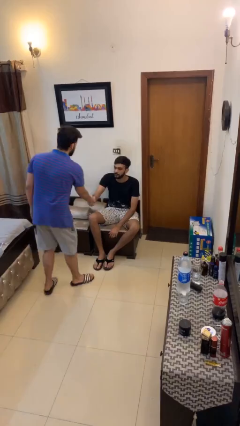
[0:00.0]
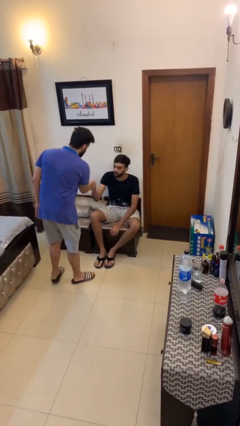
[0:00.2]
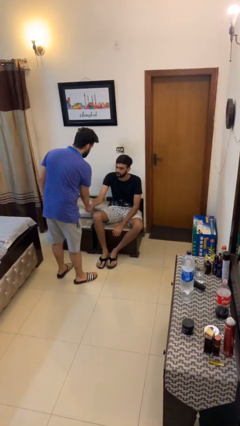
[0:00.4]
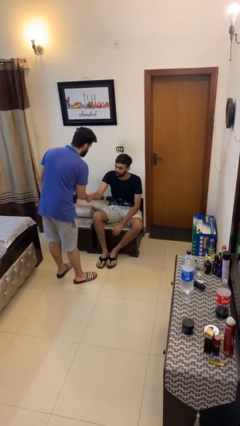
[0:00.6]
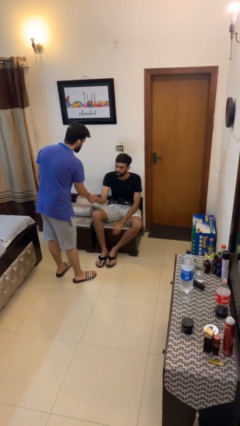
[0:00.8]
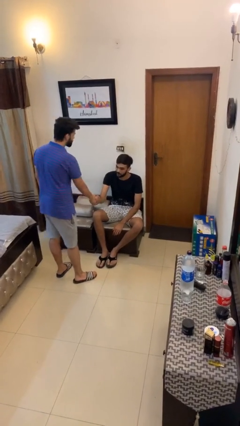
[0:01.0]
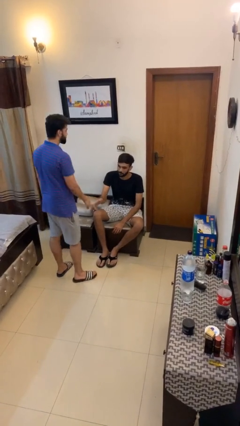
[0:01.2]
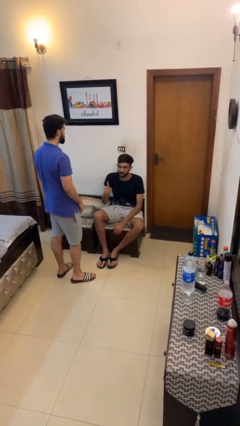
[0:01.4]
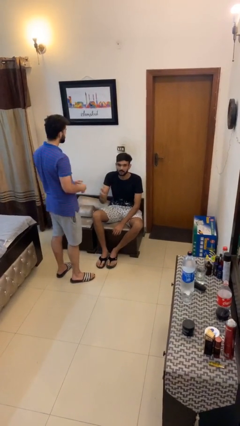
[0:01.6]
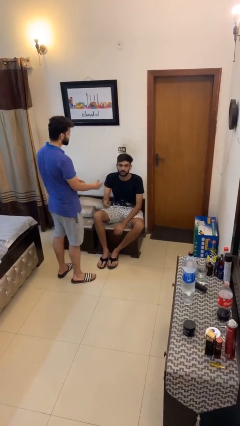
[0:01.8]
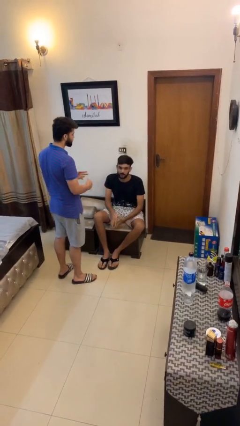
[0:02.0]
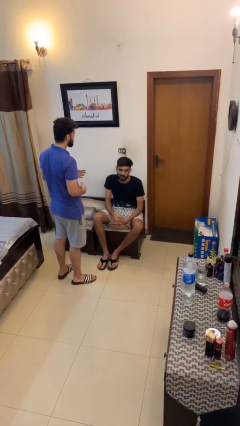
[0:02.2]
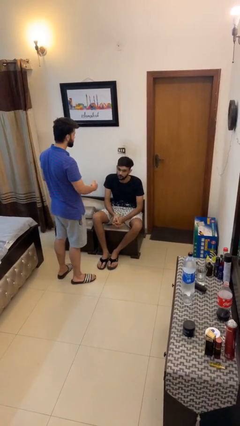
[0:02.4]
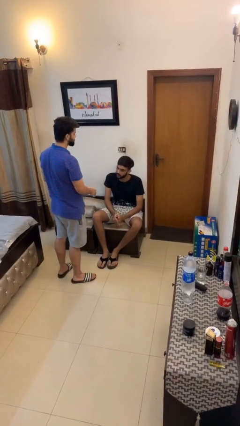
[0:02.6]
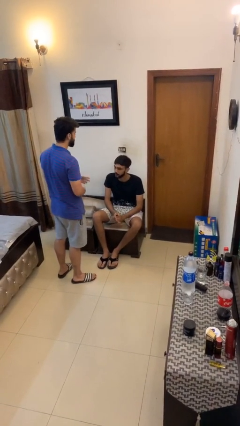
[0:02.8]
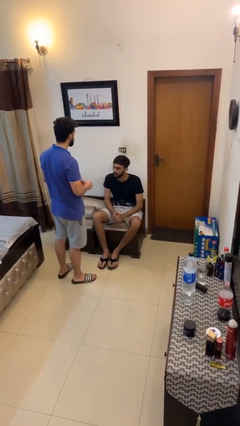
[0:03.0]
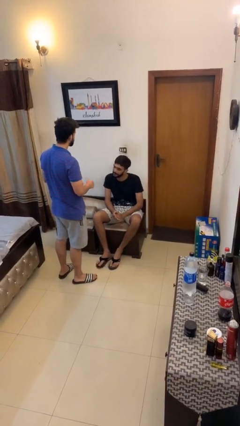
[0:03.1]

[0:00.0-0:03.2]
person shakes hand

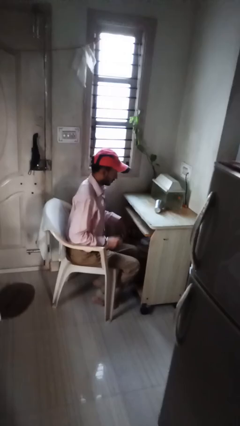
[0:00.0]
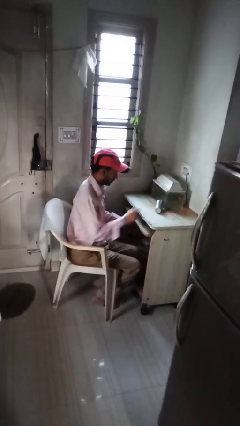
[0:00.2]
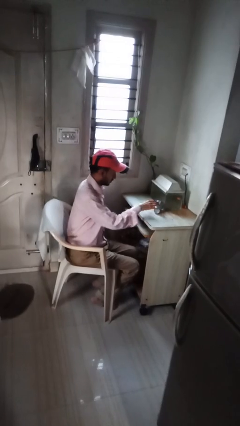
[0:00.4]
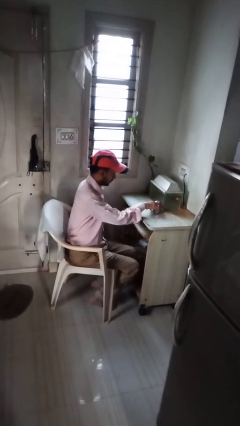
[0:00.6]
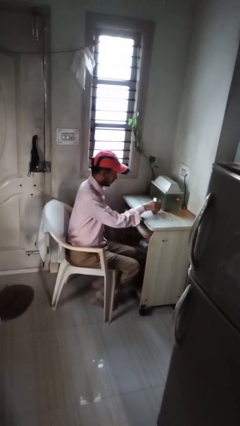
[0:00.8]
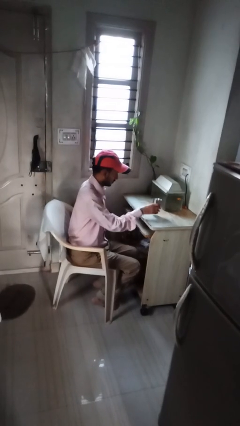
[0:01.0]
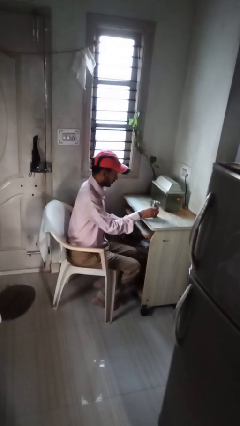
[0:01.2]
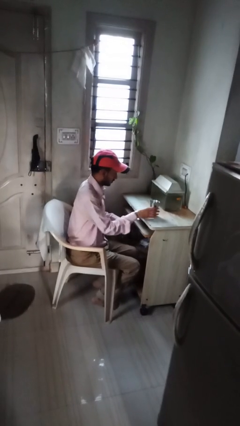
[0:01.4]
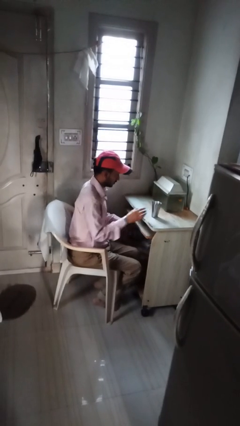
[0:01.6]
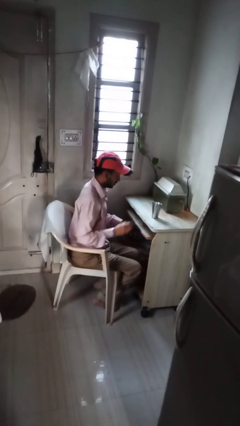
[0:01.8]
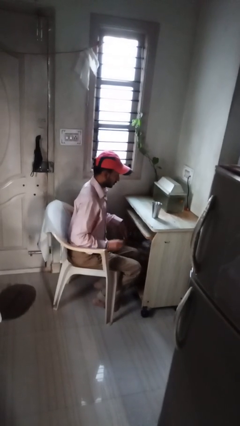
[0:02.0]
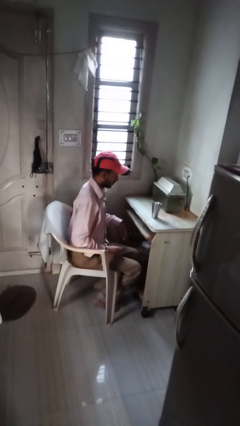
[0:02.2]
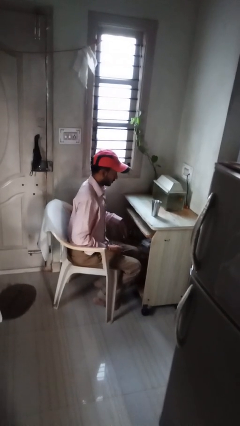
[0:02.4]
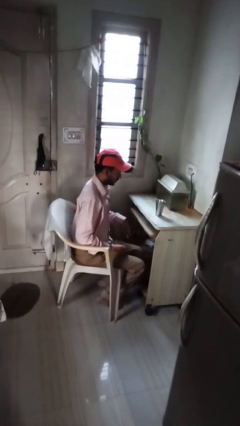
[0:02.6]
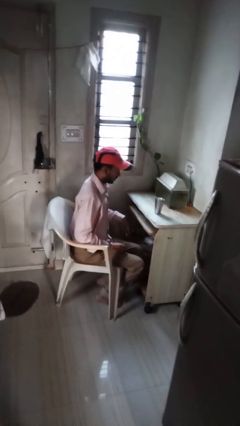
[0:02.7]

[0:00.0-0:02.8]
person sets upright glass

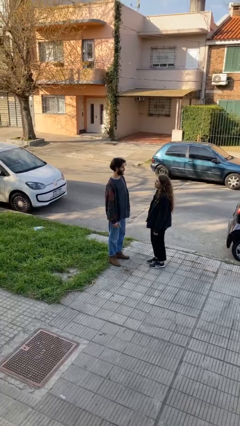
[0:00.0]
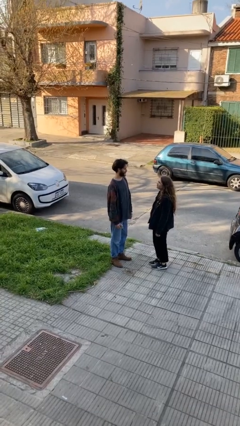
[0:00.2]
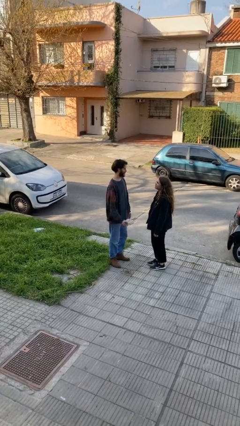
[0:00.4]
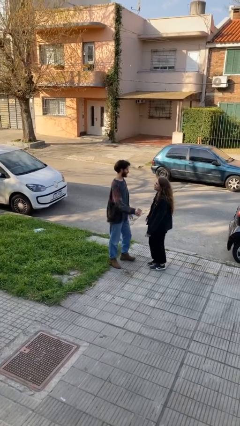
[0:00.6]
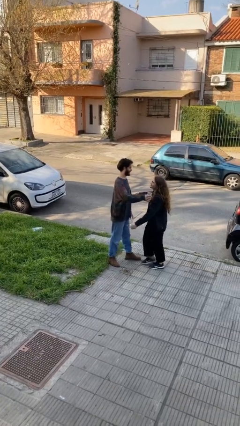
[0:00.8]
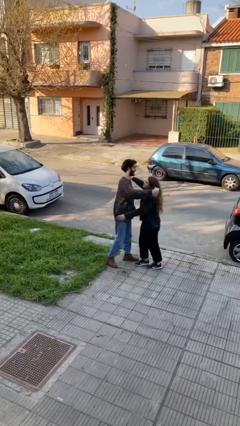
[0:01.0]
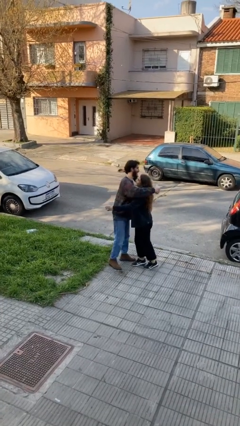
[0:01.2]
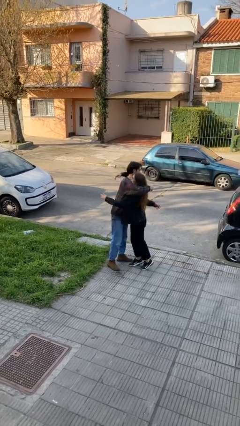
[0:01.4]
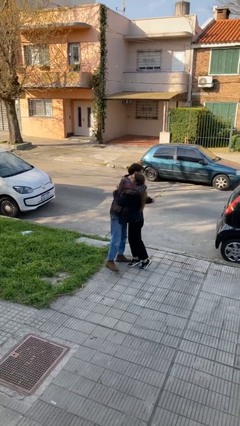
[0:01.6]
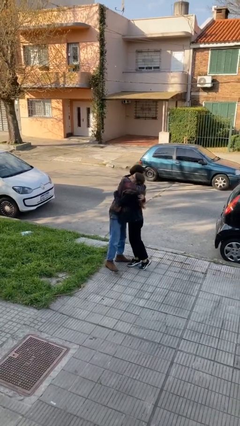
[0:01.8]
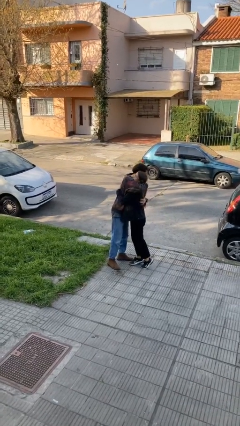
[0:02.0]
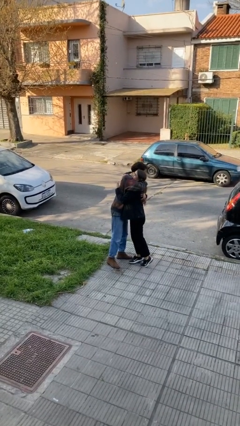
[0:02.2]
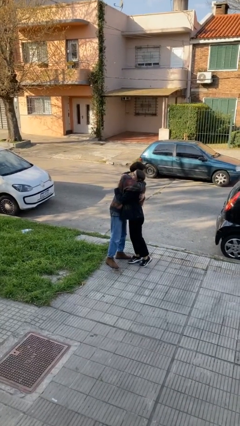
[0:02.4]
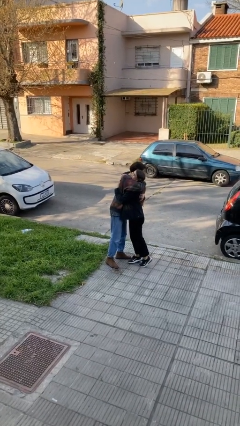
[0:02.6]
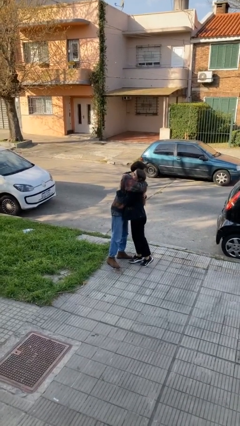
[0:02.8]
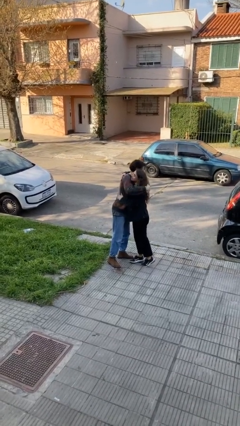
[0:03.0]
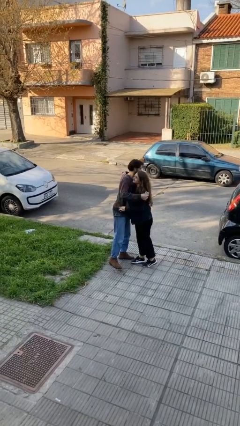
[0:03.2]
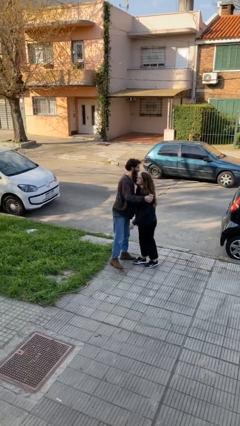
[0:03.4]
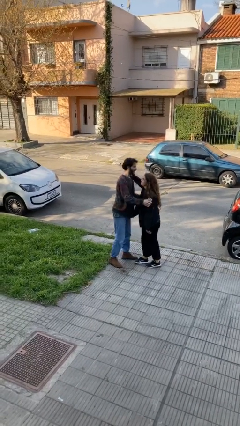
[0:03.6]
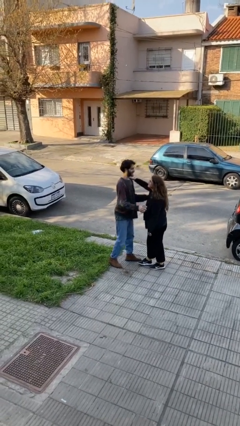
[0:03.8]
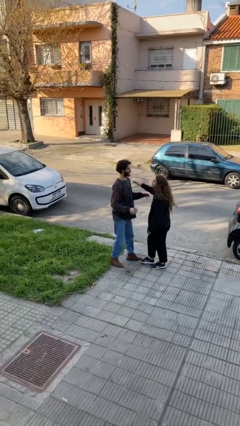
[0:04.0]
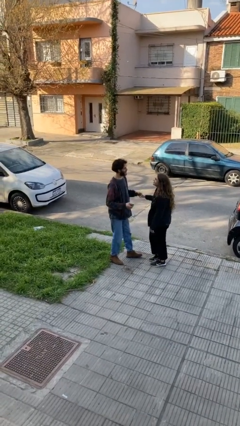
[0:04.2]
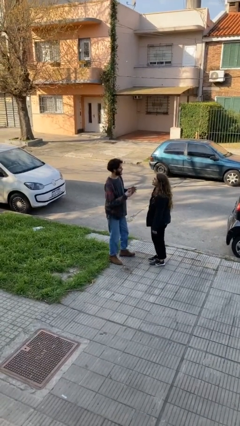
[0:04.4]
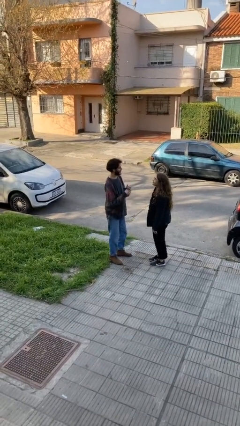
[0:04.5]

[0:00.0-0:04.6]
person embraces person

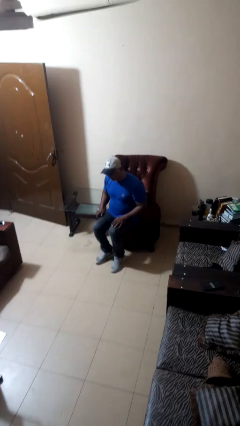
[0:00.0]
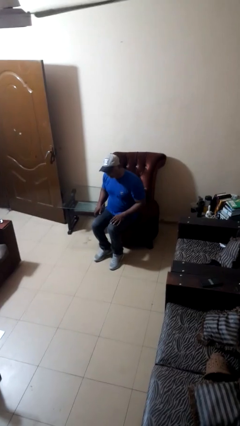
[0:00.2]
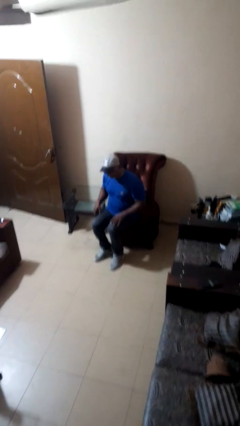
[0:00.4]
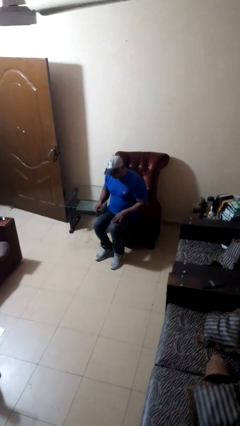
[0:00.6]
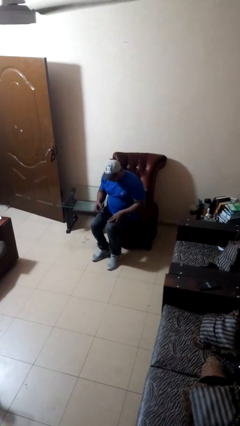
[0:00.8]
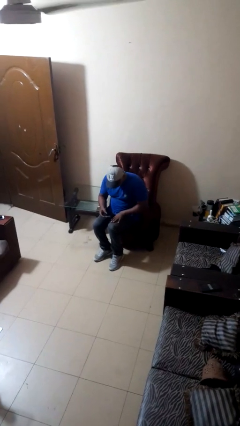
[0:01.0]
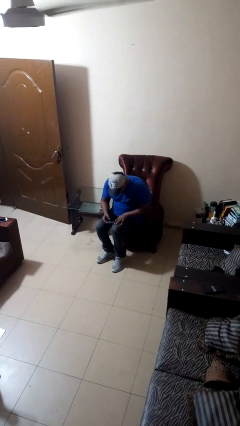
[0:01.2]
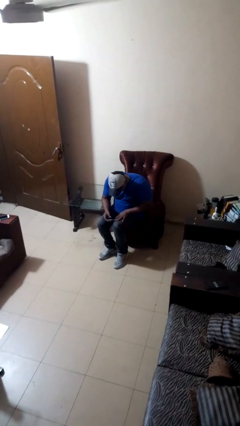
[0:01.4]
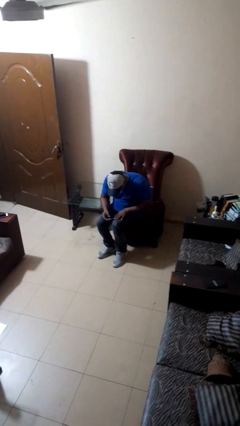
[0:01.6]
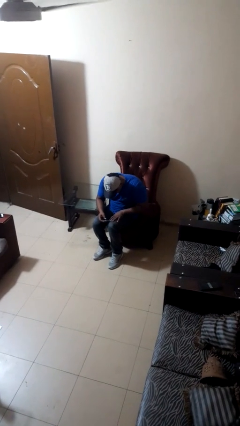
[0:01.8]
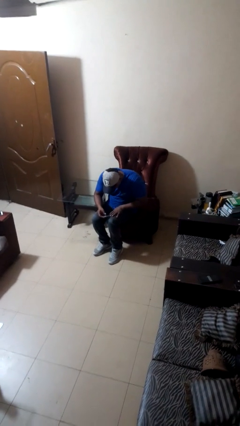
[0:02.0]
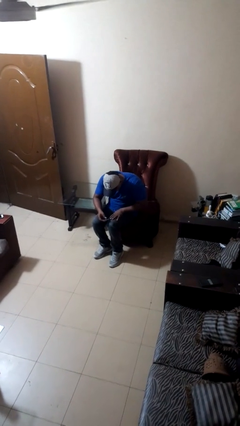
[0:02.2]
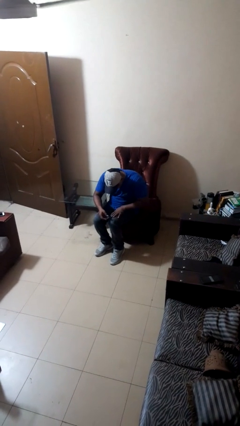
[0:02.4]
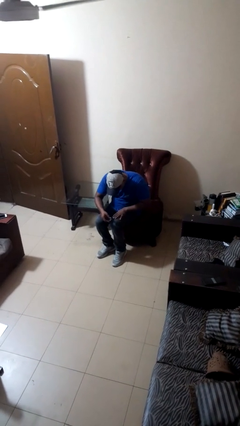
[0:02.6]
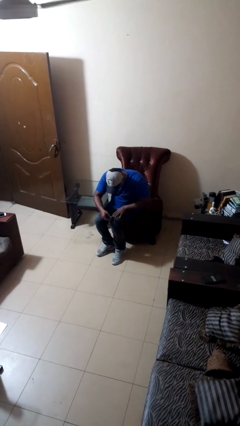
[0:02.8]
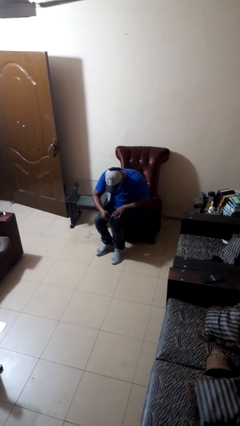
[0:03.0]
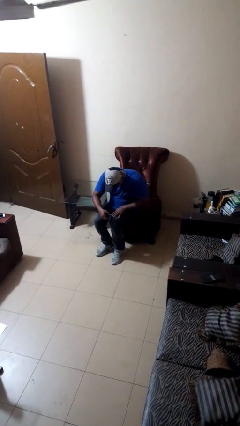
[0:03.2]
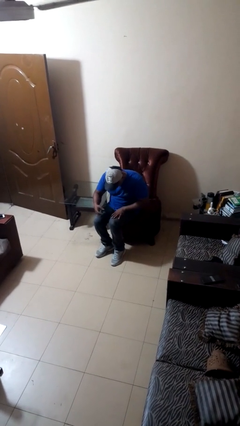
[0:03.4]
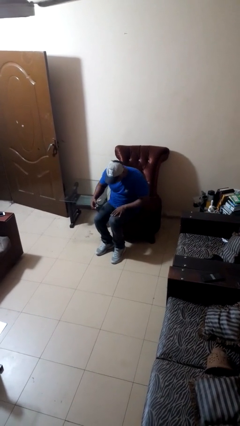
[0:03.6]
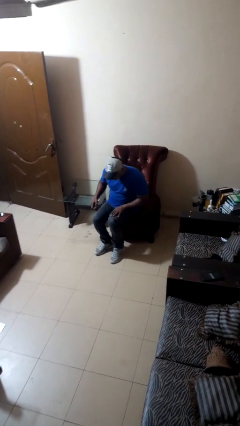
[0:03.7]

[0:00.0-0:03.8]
person clips fingernails

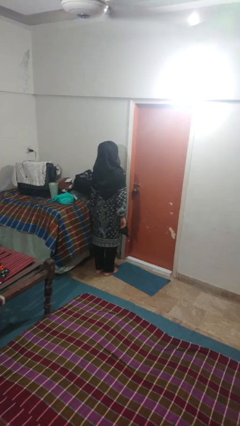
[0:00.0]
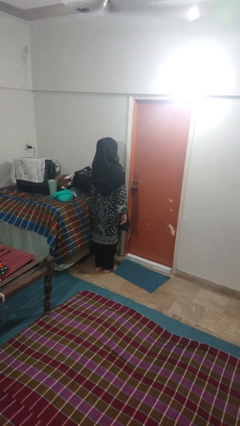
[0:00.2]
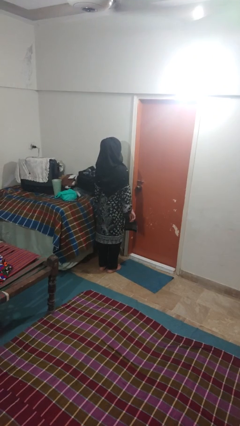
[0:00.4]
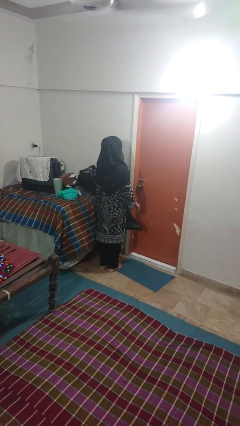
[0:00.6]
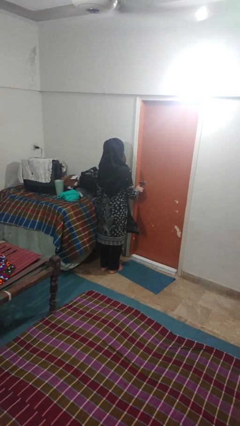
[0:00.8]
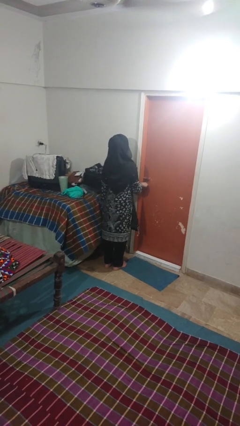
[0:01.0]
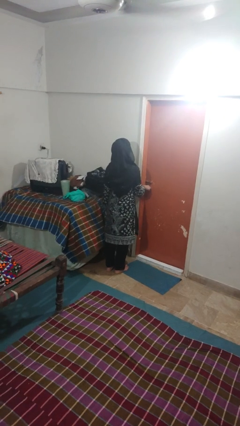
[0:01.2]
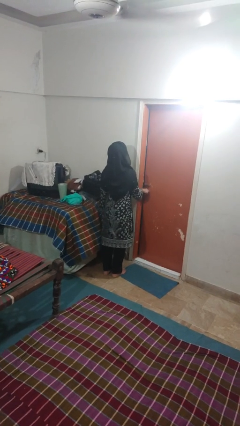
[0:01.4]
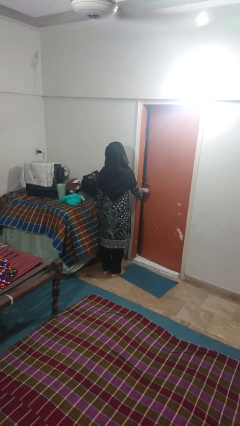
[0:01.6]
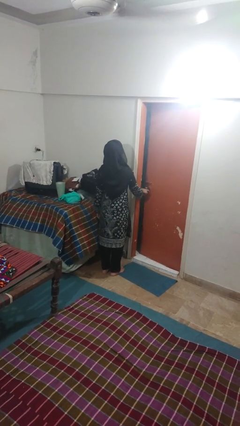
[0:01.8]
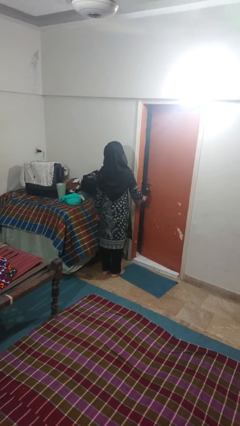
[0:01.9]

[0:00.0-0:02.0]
person opens facility door

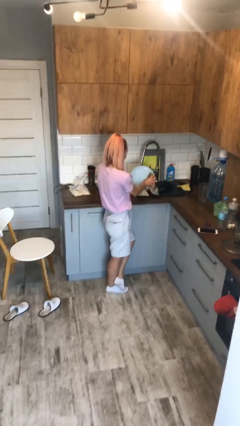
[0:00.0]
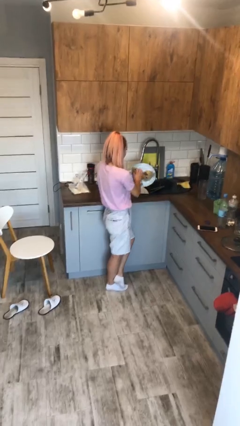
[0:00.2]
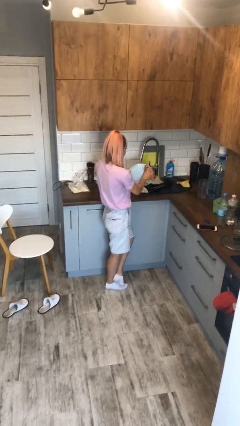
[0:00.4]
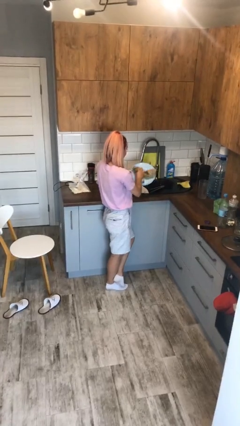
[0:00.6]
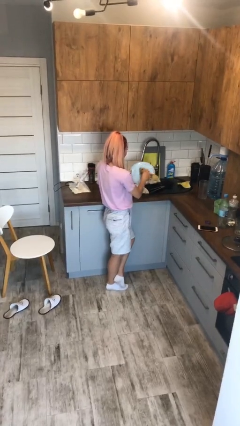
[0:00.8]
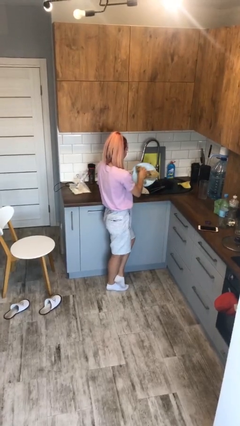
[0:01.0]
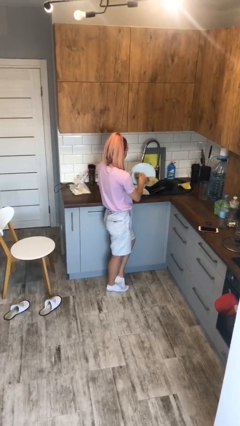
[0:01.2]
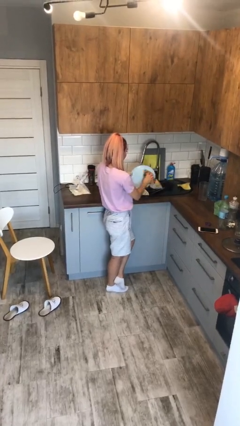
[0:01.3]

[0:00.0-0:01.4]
person dries dish
